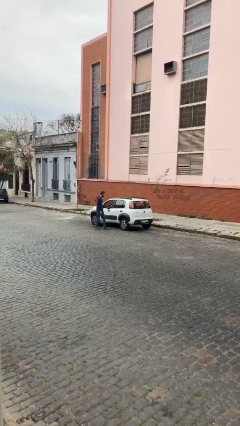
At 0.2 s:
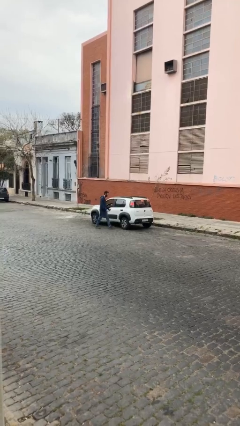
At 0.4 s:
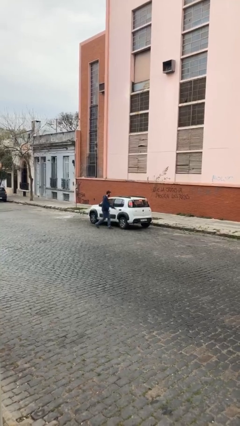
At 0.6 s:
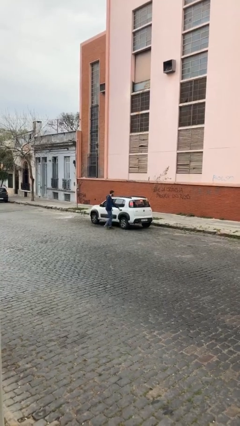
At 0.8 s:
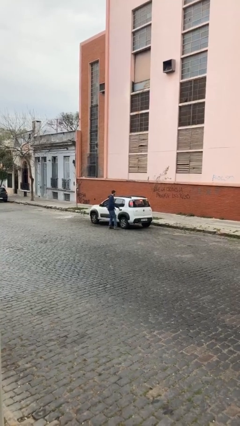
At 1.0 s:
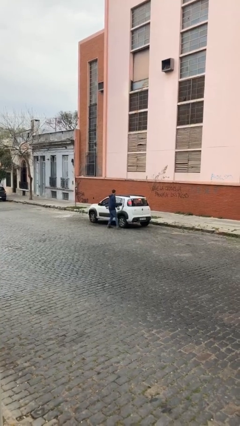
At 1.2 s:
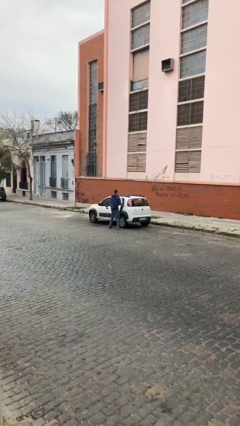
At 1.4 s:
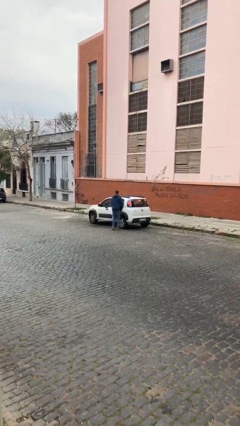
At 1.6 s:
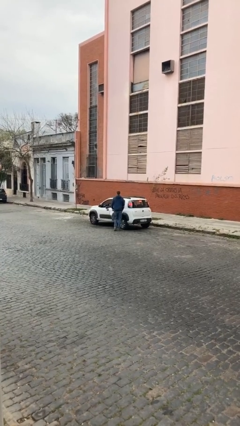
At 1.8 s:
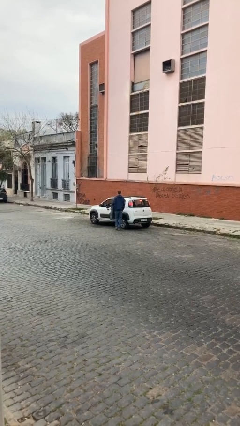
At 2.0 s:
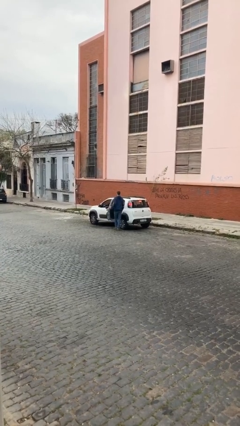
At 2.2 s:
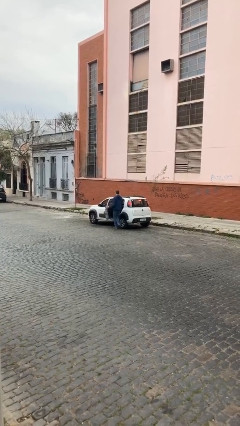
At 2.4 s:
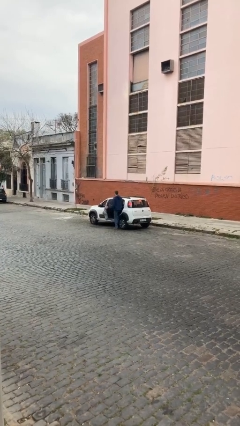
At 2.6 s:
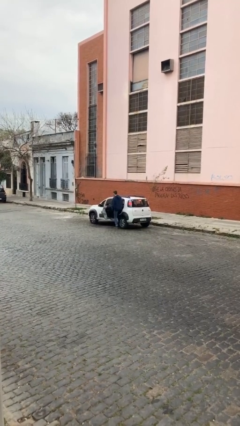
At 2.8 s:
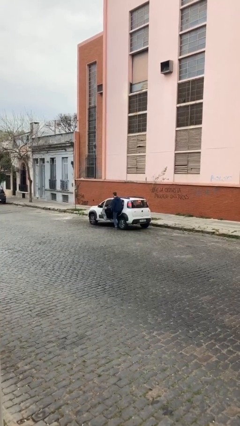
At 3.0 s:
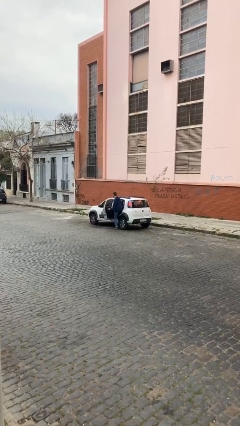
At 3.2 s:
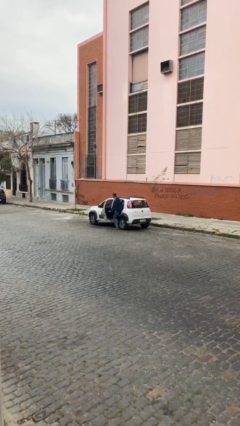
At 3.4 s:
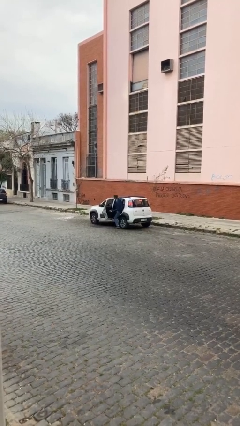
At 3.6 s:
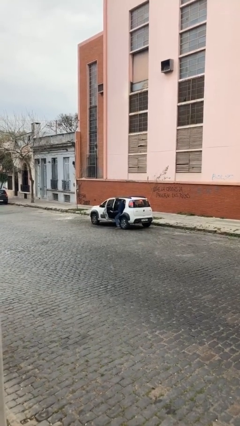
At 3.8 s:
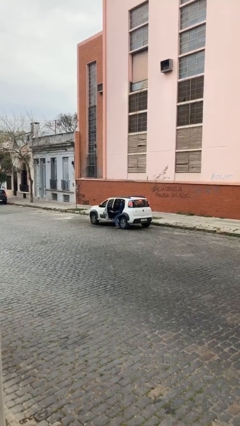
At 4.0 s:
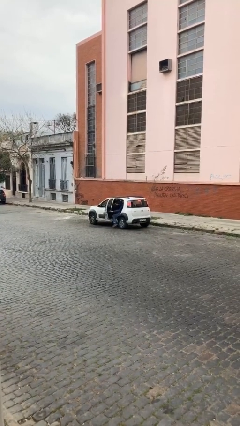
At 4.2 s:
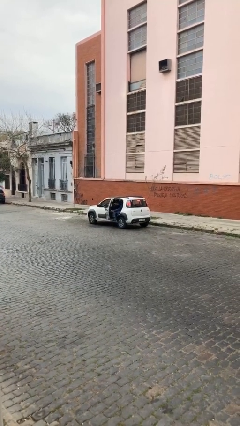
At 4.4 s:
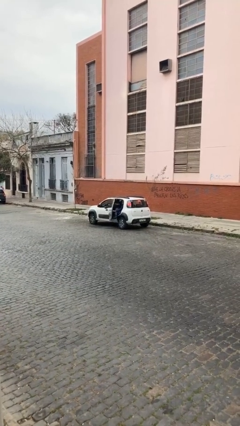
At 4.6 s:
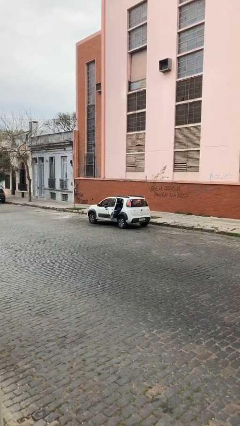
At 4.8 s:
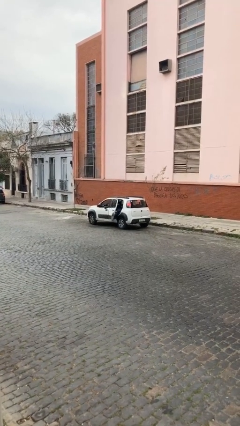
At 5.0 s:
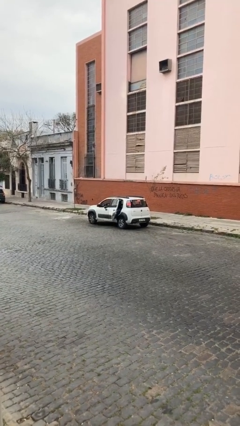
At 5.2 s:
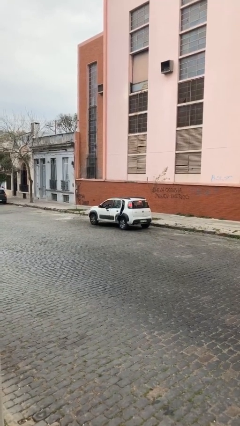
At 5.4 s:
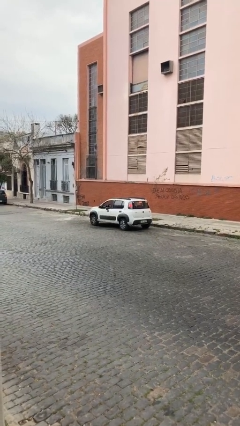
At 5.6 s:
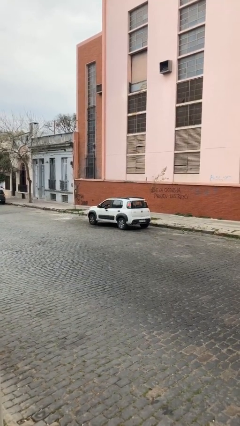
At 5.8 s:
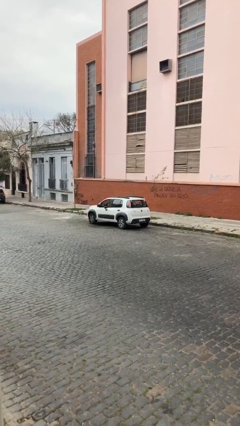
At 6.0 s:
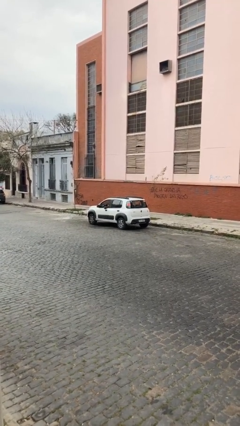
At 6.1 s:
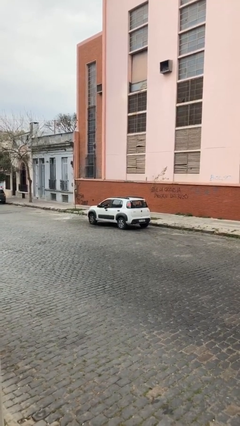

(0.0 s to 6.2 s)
car picks up person

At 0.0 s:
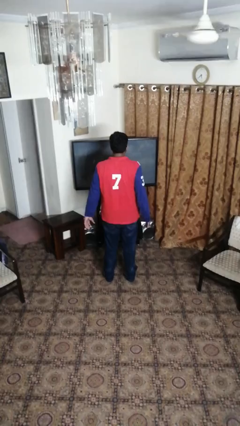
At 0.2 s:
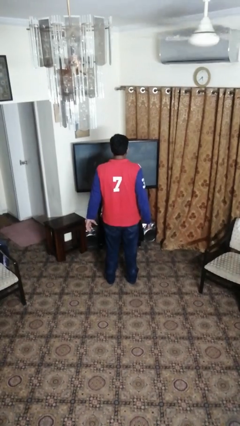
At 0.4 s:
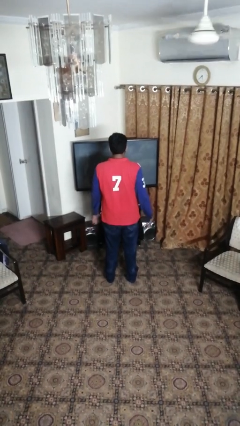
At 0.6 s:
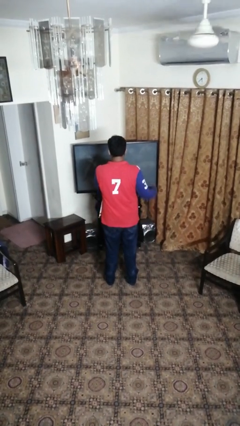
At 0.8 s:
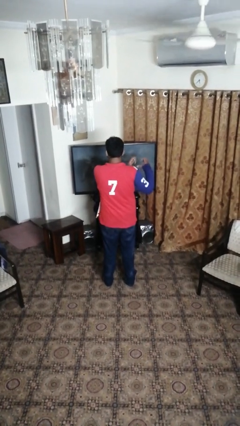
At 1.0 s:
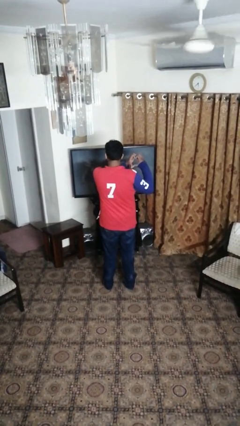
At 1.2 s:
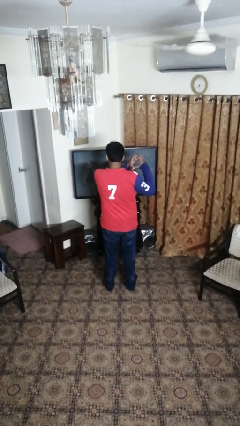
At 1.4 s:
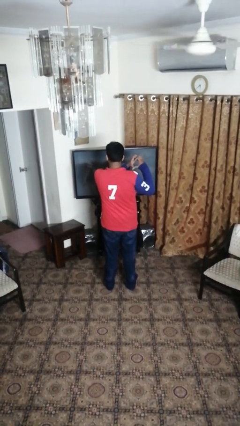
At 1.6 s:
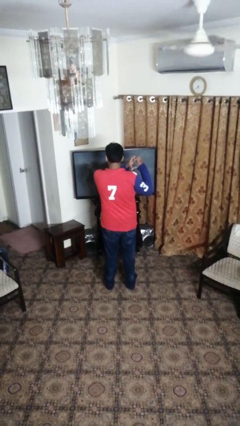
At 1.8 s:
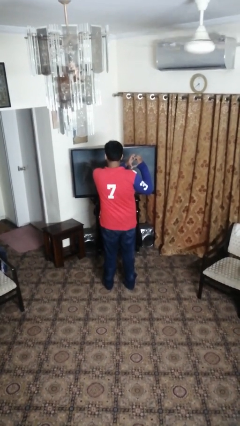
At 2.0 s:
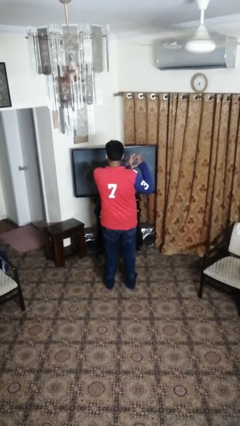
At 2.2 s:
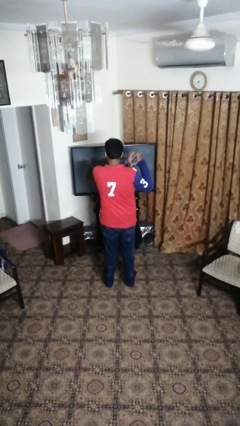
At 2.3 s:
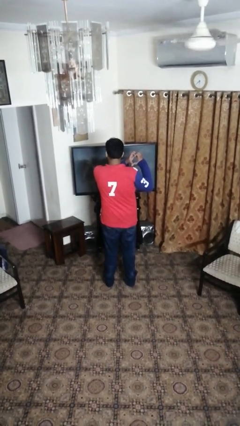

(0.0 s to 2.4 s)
person gestures heart

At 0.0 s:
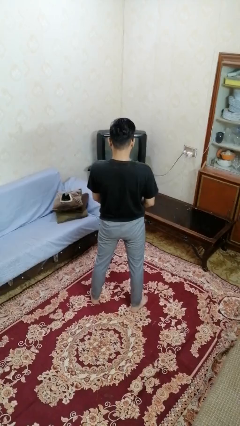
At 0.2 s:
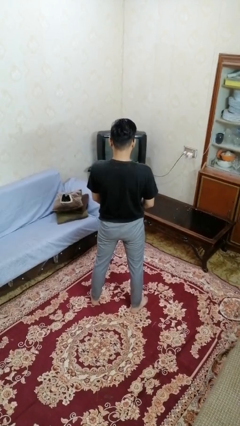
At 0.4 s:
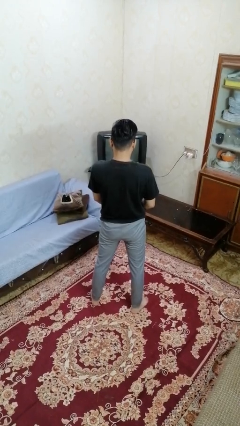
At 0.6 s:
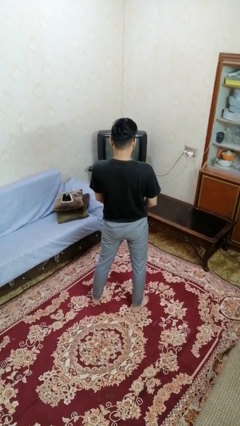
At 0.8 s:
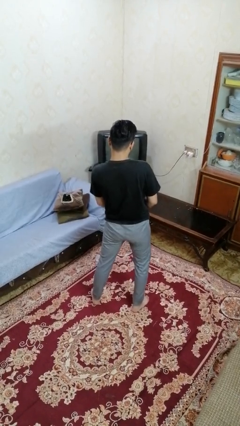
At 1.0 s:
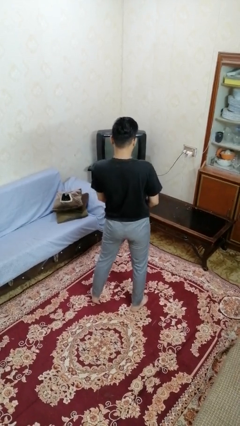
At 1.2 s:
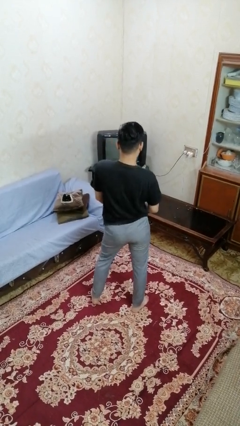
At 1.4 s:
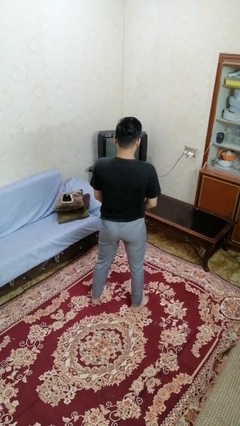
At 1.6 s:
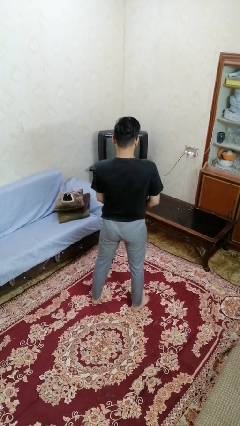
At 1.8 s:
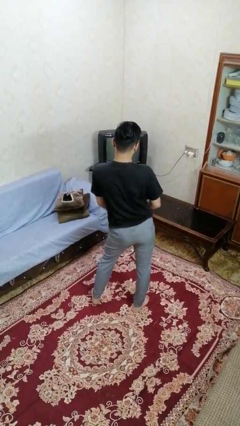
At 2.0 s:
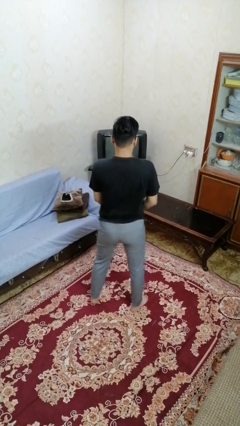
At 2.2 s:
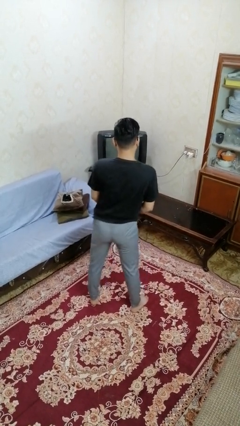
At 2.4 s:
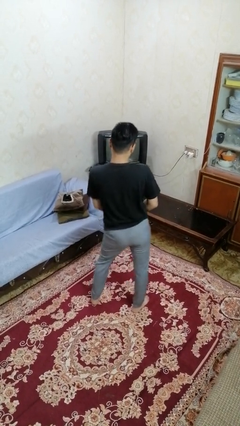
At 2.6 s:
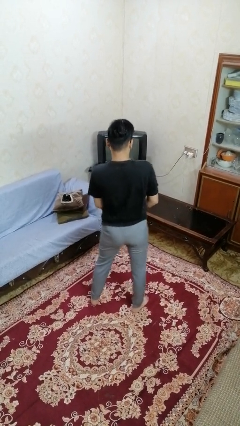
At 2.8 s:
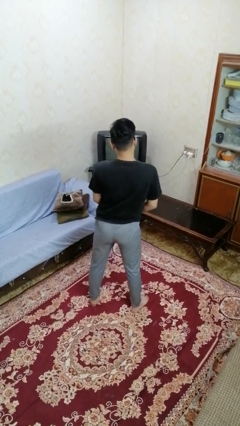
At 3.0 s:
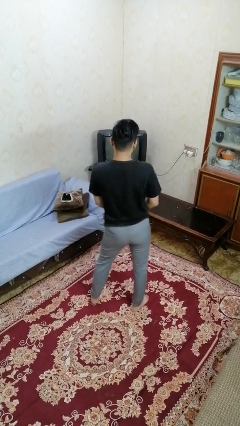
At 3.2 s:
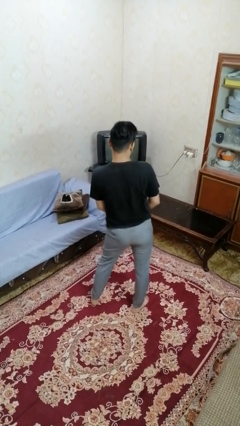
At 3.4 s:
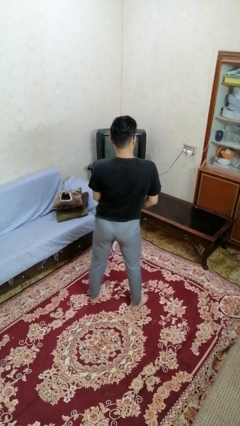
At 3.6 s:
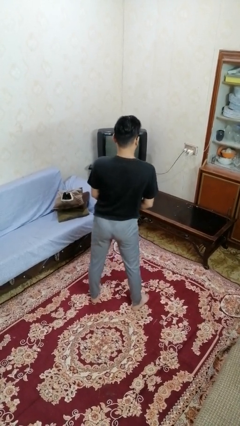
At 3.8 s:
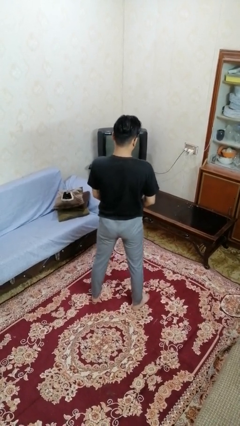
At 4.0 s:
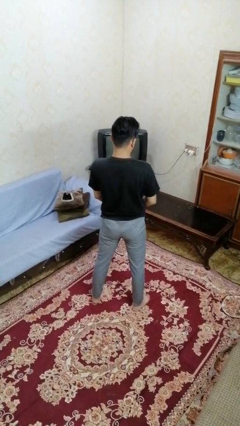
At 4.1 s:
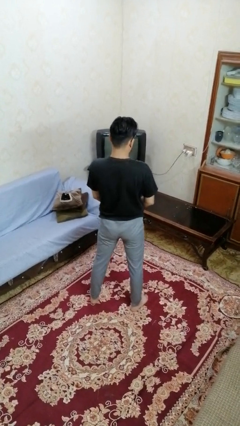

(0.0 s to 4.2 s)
person wiggles hips

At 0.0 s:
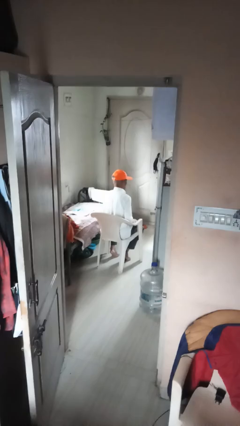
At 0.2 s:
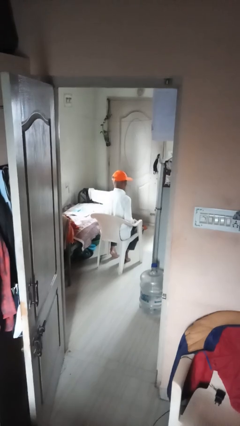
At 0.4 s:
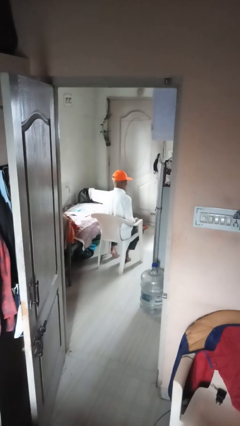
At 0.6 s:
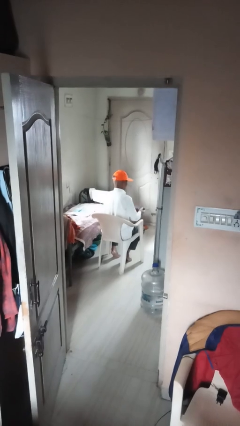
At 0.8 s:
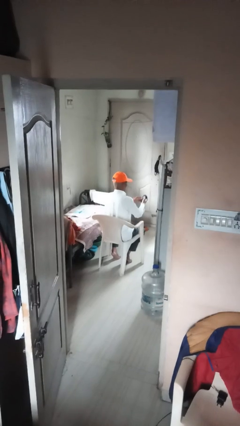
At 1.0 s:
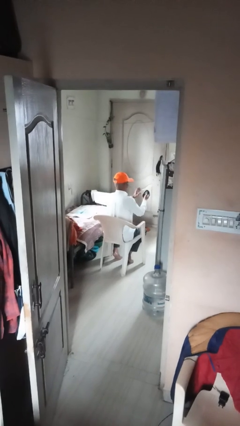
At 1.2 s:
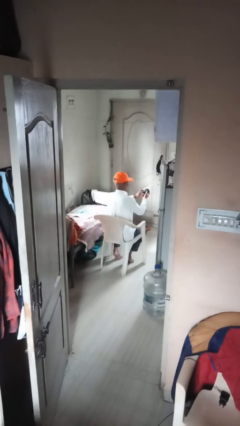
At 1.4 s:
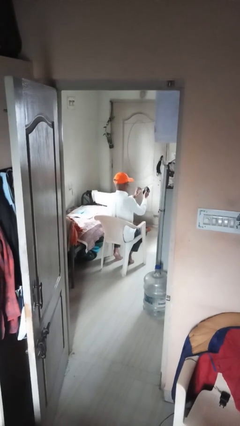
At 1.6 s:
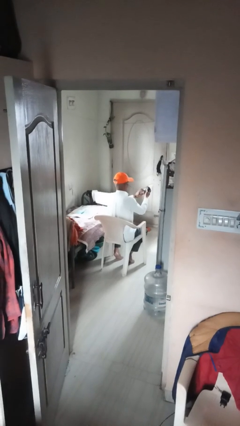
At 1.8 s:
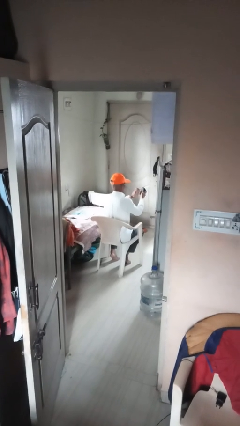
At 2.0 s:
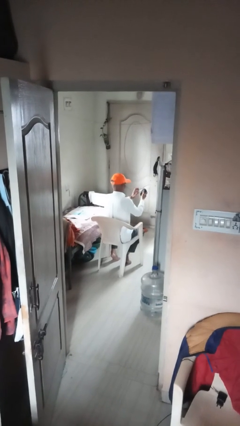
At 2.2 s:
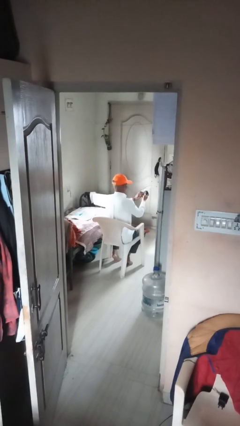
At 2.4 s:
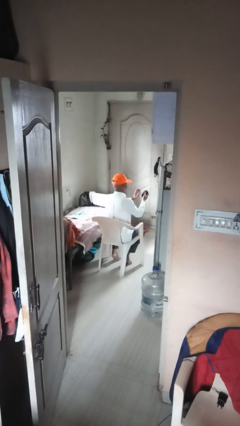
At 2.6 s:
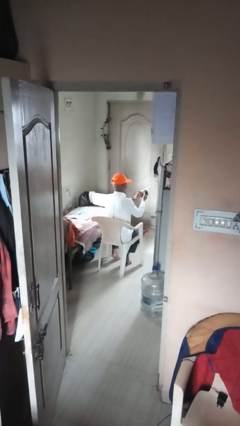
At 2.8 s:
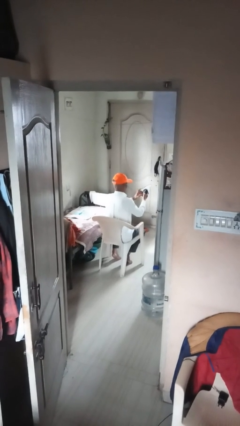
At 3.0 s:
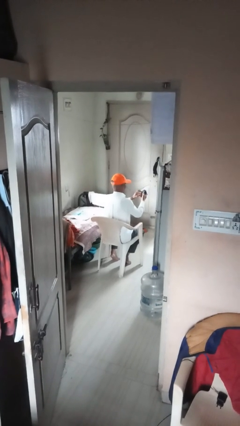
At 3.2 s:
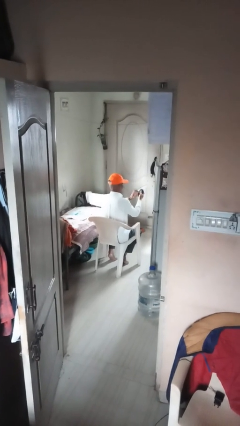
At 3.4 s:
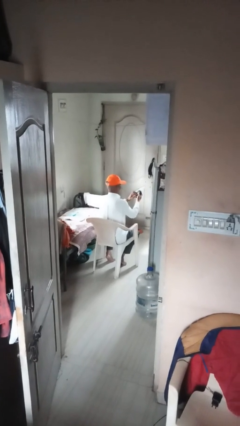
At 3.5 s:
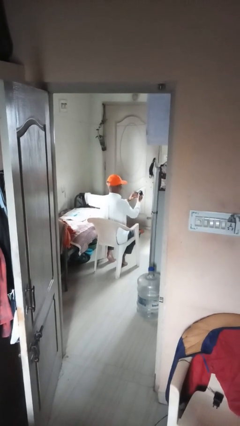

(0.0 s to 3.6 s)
person taps object with finger

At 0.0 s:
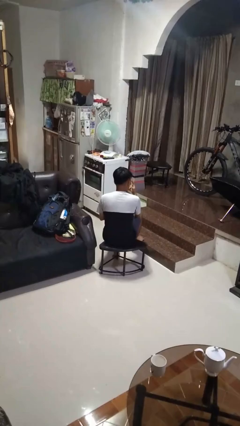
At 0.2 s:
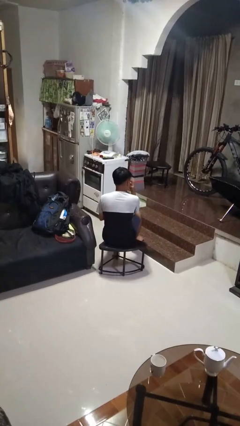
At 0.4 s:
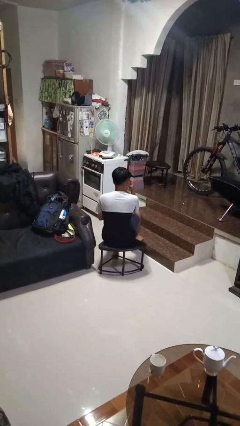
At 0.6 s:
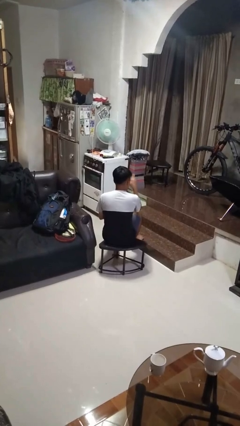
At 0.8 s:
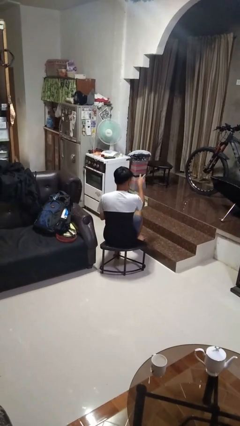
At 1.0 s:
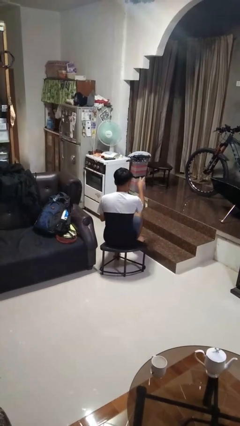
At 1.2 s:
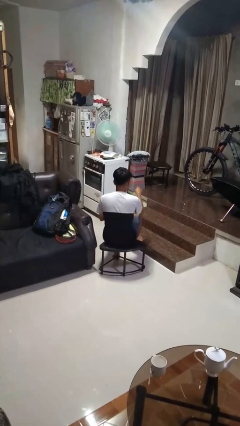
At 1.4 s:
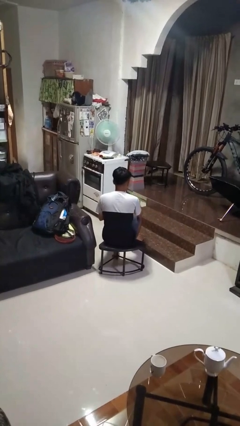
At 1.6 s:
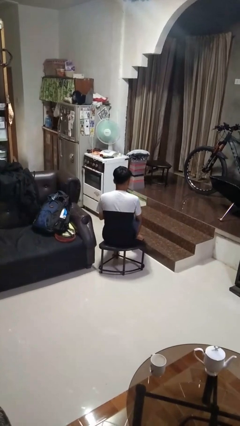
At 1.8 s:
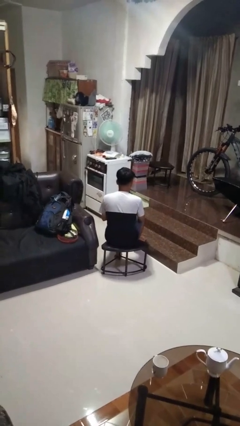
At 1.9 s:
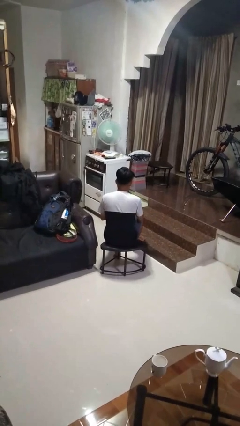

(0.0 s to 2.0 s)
person gestures watch closely
